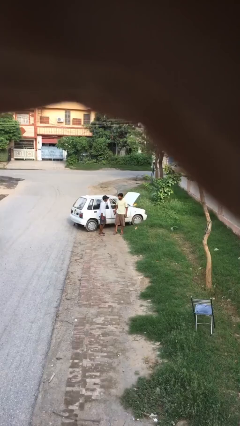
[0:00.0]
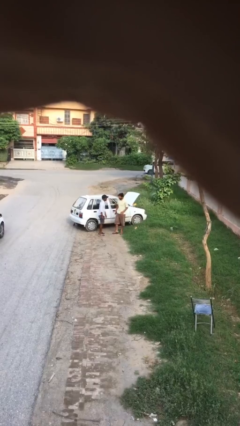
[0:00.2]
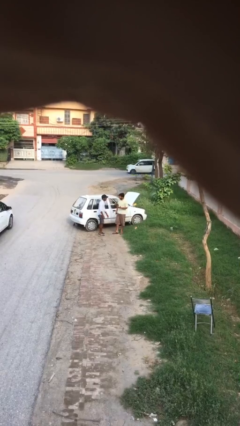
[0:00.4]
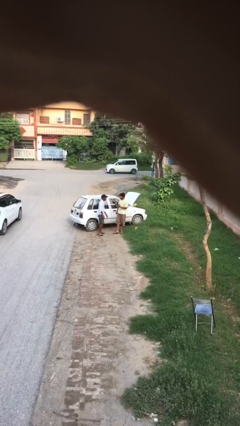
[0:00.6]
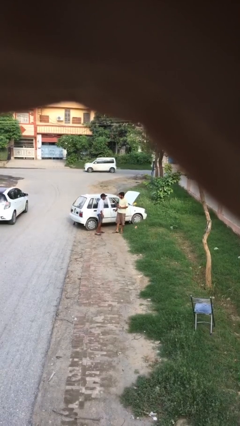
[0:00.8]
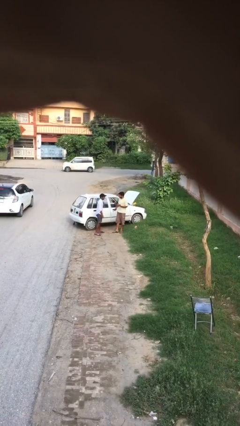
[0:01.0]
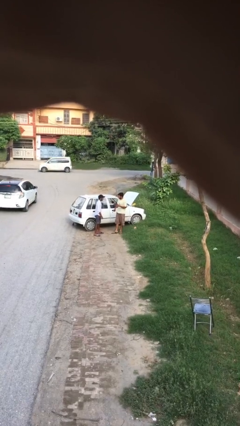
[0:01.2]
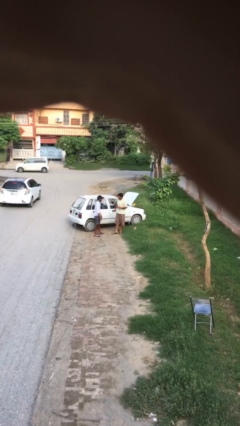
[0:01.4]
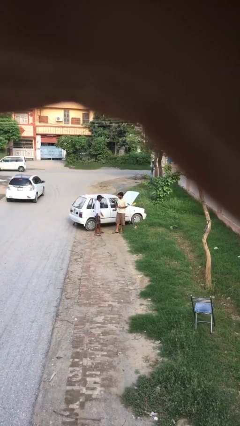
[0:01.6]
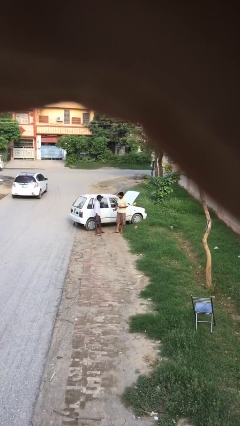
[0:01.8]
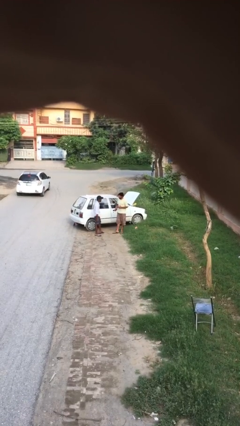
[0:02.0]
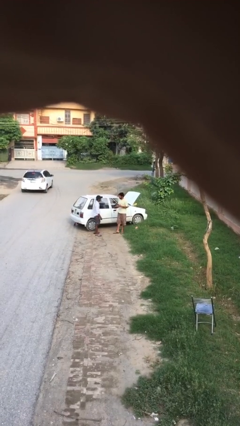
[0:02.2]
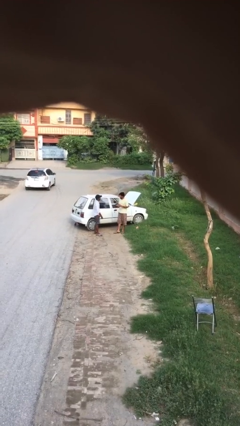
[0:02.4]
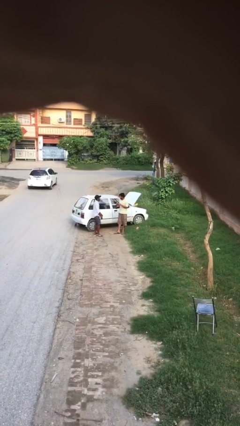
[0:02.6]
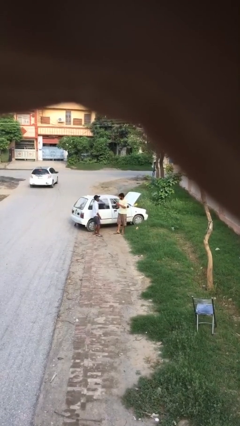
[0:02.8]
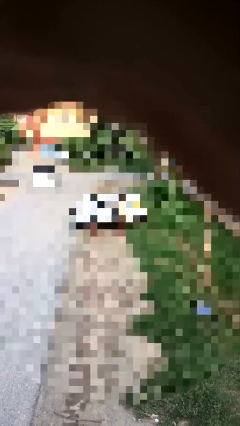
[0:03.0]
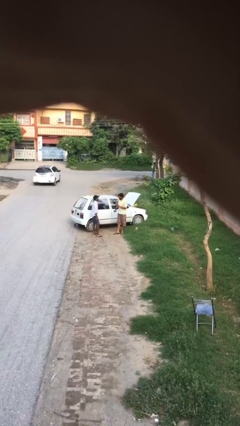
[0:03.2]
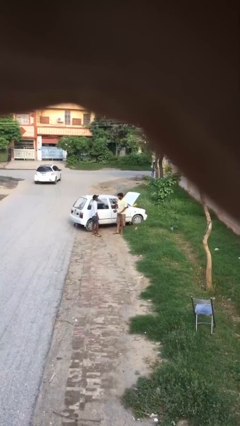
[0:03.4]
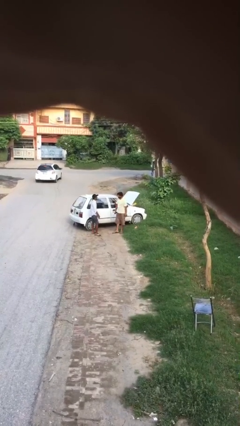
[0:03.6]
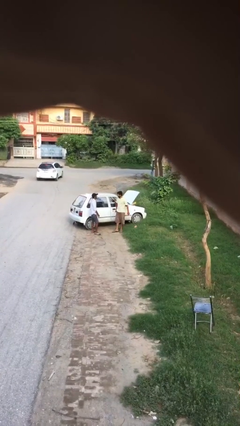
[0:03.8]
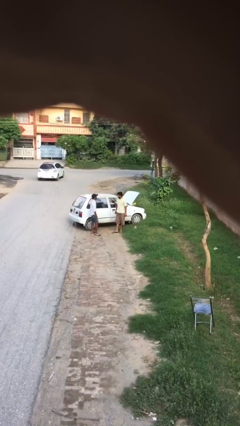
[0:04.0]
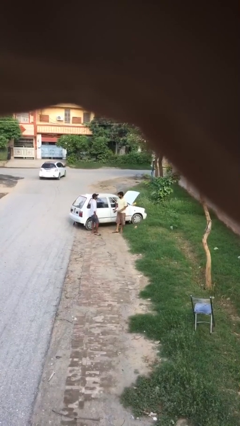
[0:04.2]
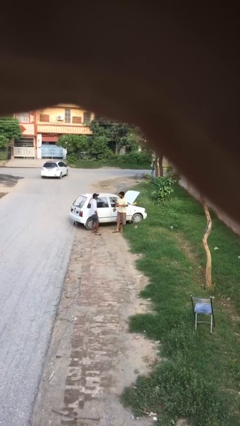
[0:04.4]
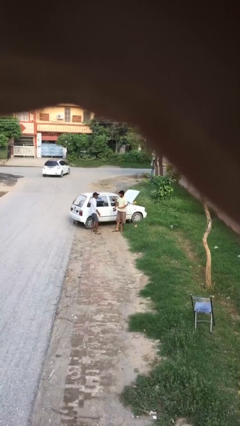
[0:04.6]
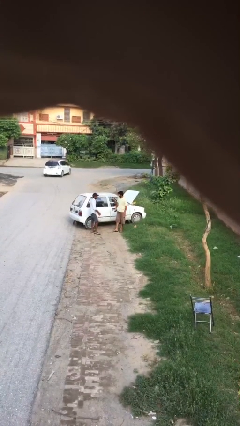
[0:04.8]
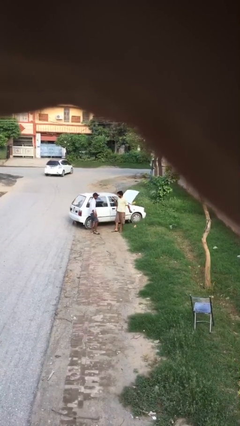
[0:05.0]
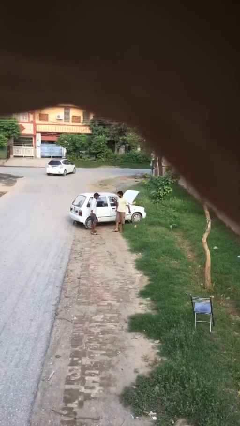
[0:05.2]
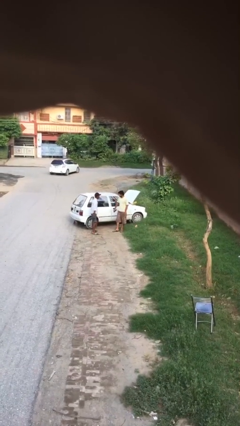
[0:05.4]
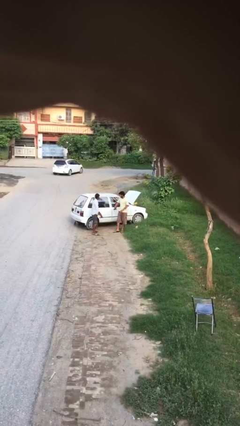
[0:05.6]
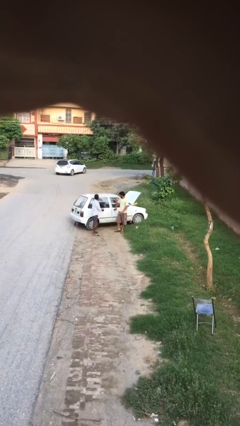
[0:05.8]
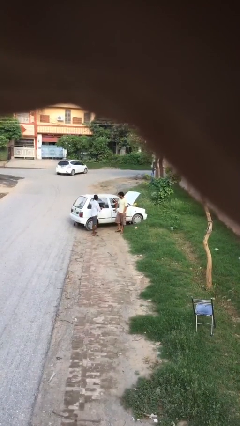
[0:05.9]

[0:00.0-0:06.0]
person talks to person

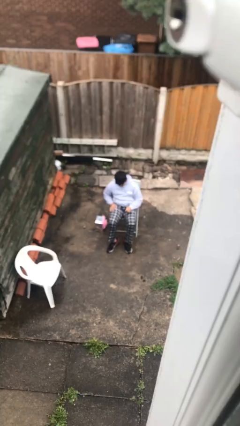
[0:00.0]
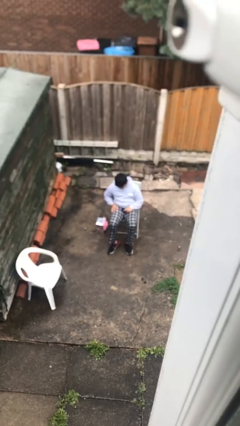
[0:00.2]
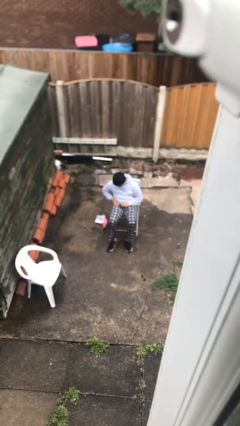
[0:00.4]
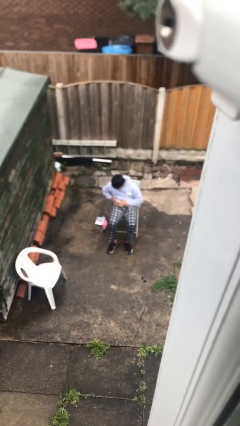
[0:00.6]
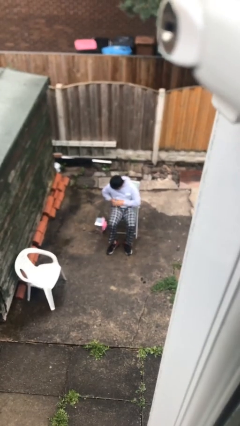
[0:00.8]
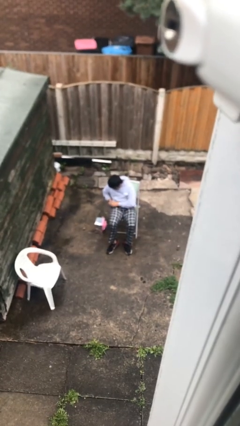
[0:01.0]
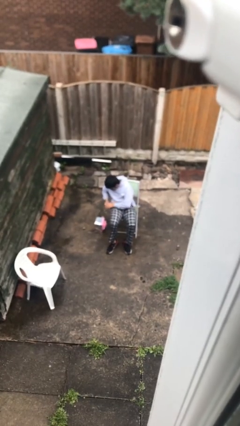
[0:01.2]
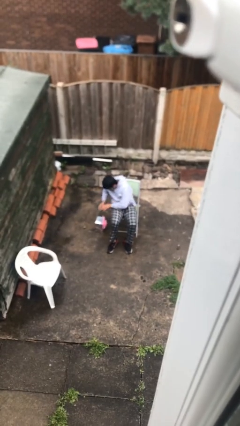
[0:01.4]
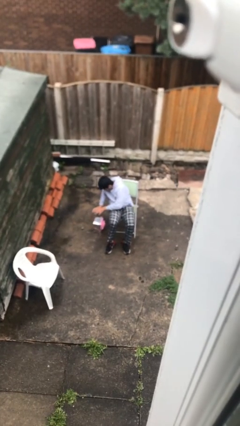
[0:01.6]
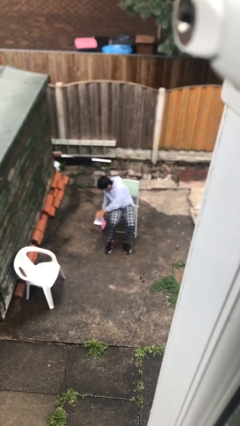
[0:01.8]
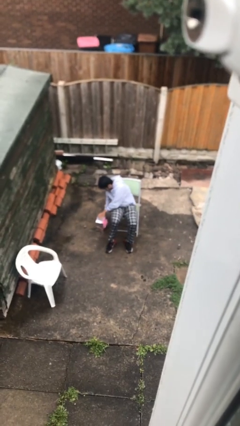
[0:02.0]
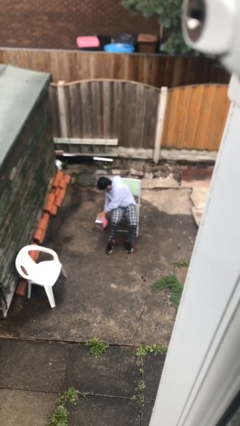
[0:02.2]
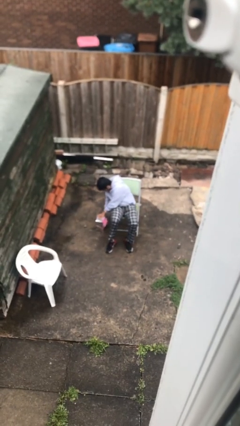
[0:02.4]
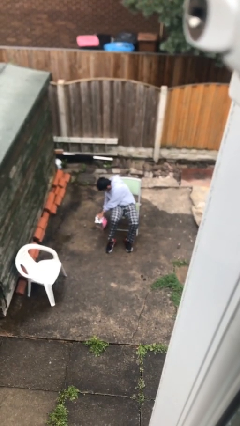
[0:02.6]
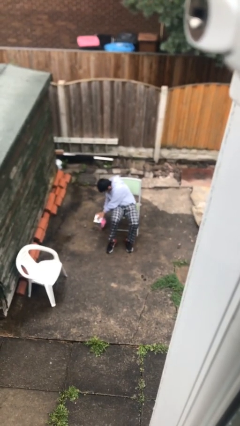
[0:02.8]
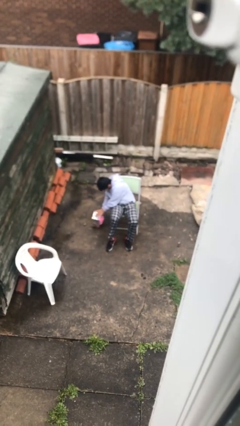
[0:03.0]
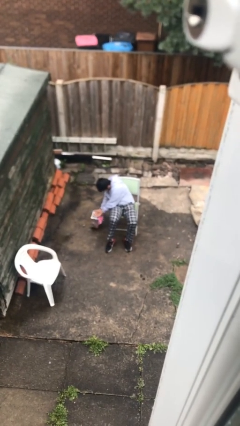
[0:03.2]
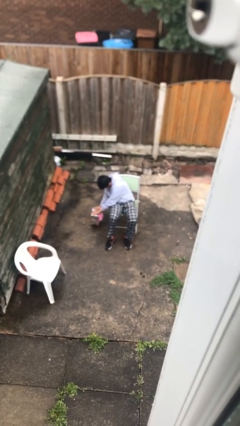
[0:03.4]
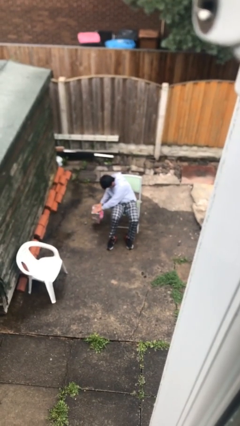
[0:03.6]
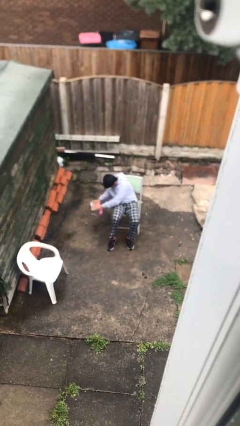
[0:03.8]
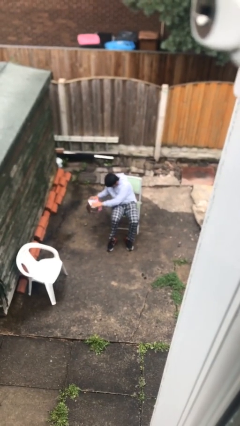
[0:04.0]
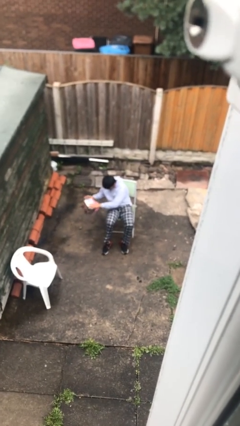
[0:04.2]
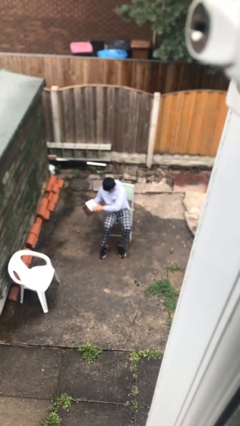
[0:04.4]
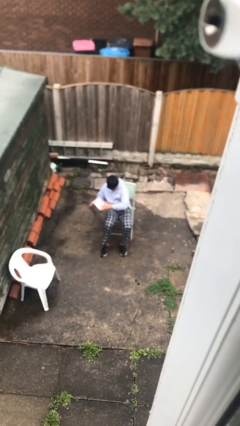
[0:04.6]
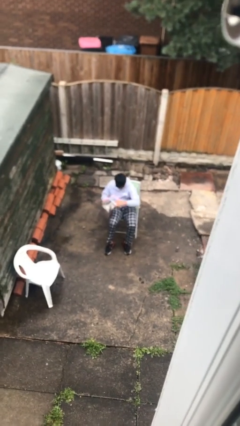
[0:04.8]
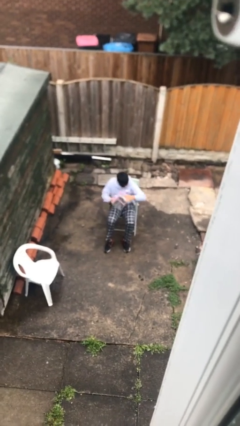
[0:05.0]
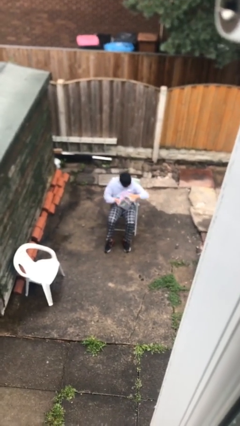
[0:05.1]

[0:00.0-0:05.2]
person picks up object from floor

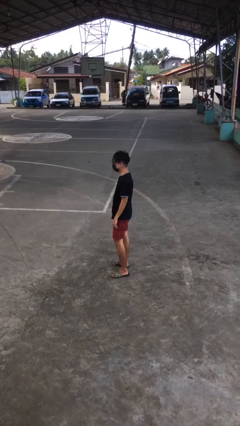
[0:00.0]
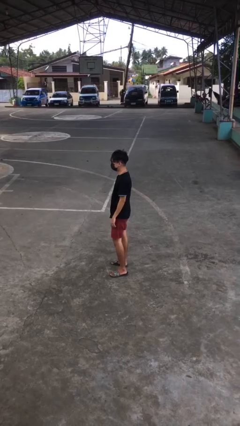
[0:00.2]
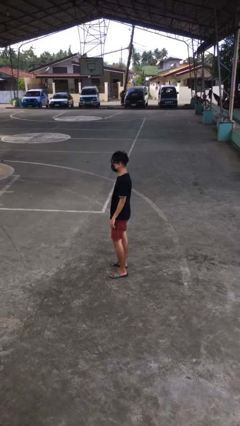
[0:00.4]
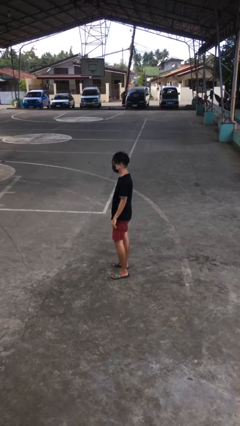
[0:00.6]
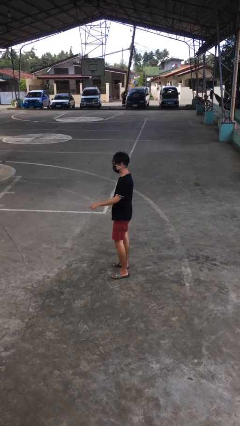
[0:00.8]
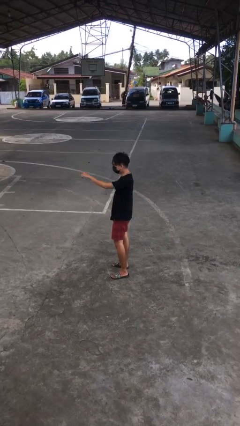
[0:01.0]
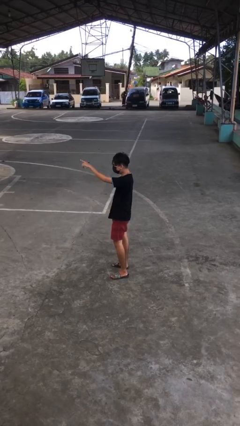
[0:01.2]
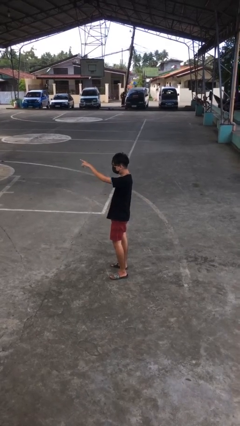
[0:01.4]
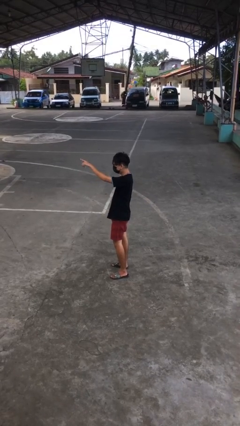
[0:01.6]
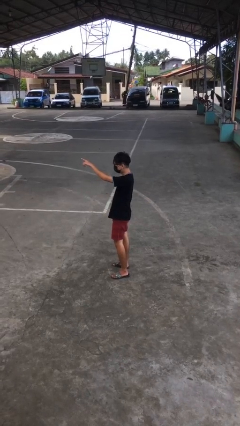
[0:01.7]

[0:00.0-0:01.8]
person points at person

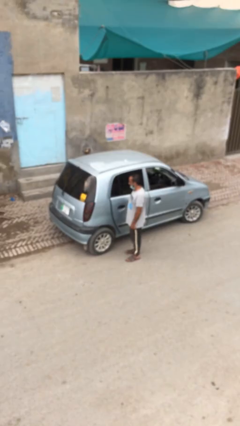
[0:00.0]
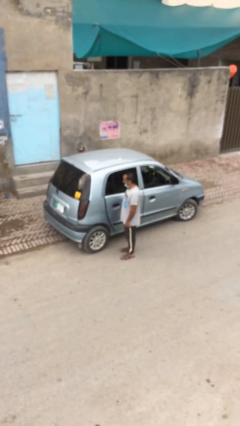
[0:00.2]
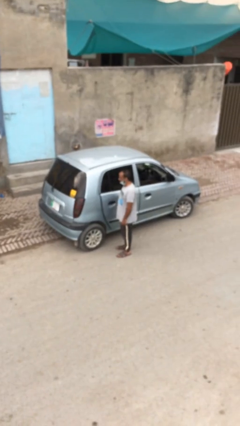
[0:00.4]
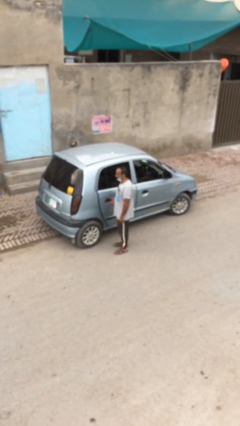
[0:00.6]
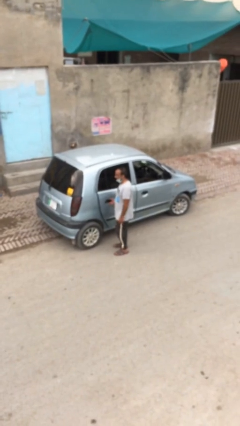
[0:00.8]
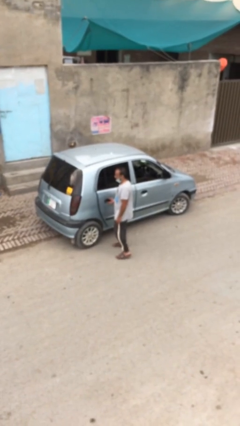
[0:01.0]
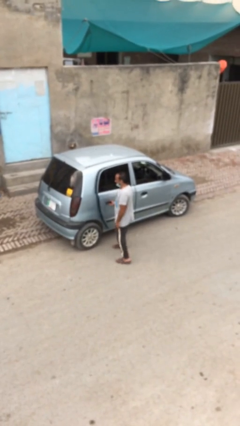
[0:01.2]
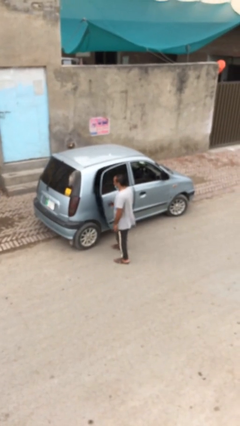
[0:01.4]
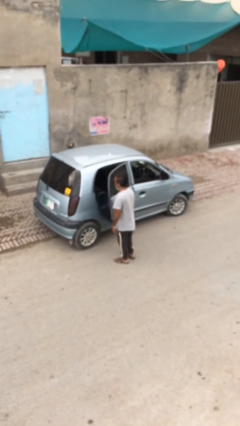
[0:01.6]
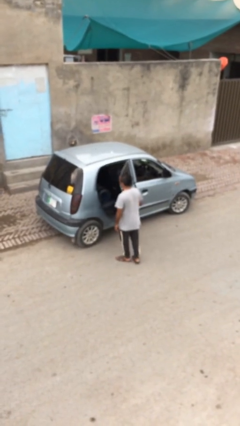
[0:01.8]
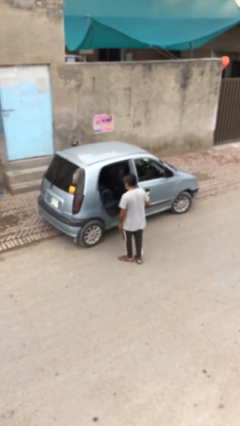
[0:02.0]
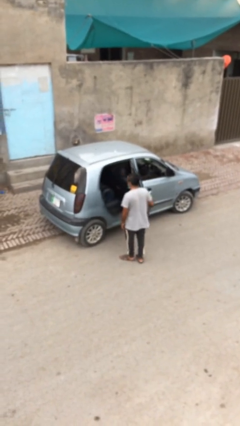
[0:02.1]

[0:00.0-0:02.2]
person opens car door

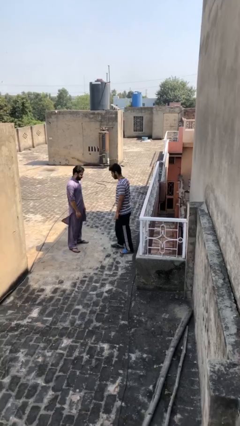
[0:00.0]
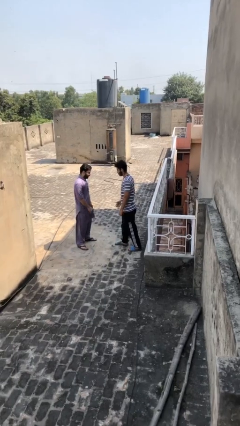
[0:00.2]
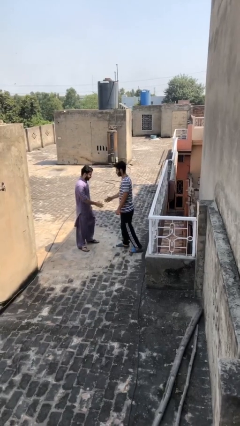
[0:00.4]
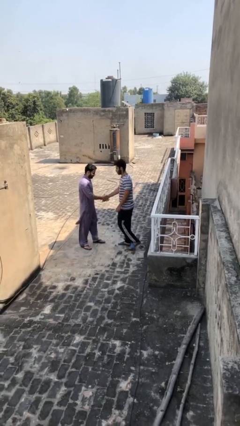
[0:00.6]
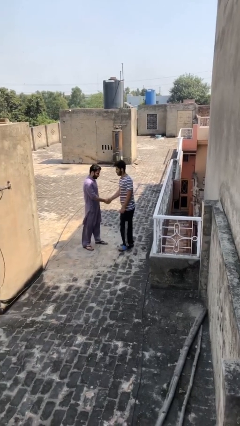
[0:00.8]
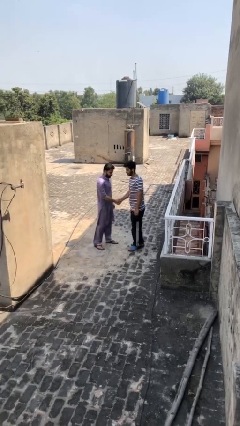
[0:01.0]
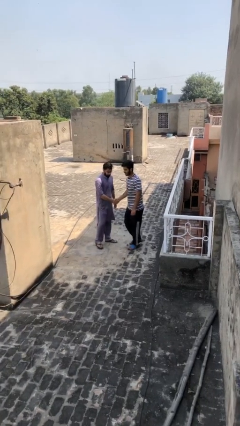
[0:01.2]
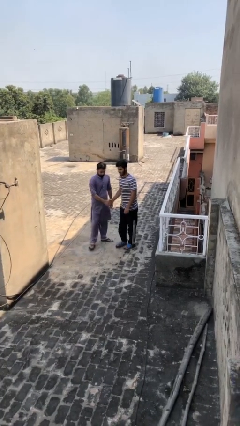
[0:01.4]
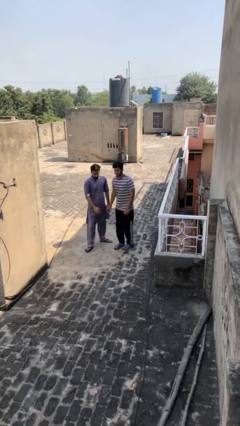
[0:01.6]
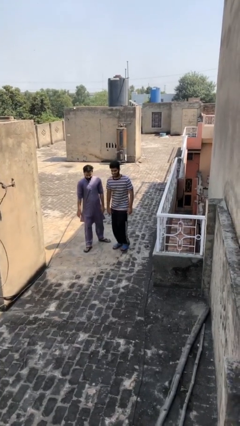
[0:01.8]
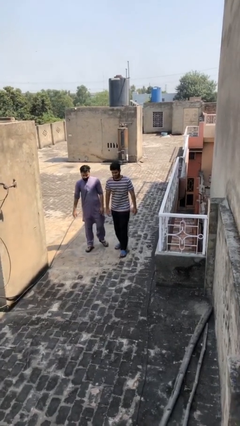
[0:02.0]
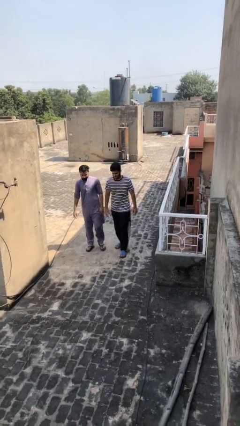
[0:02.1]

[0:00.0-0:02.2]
person shakes hand
